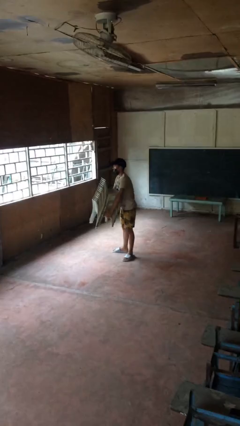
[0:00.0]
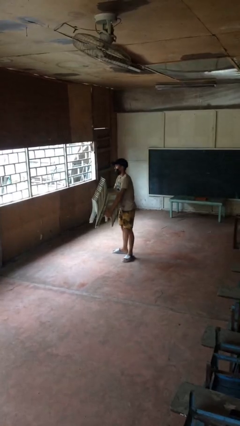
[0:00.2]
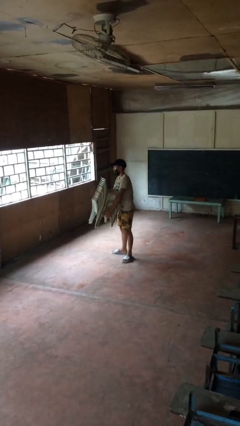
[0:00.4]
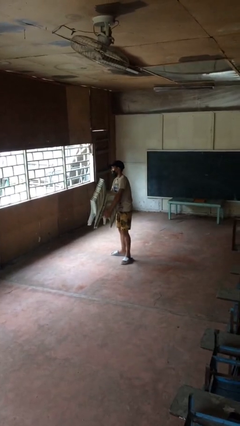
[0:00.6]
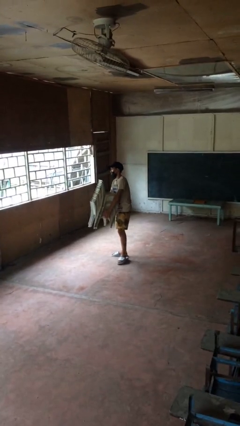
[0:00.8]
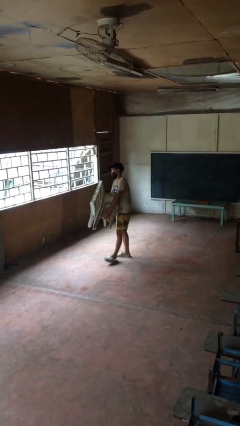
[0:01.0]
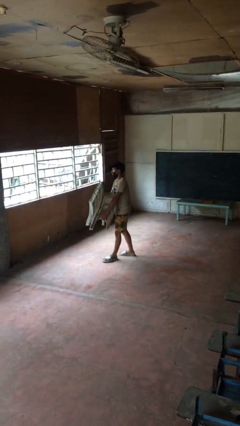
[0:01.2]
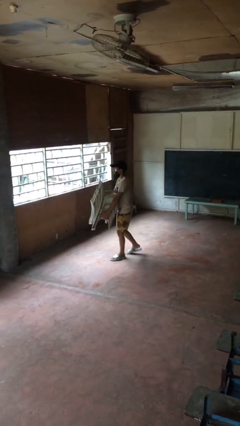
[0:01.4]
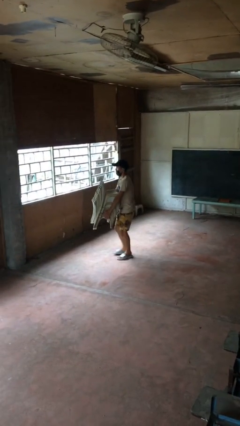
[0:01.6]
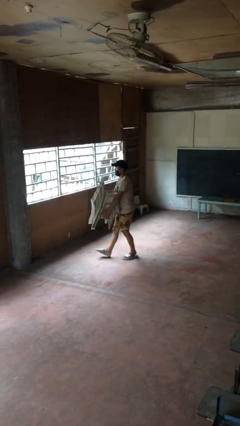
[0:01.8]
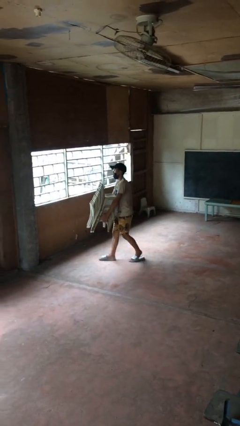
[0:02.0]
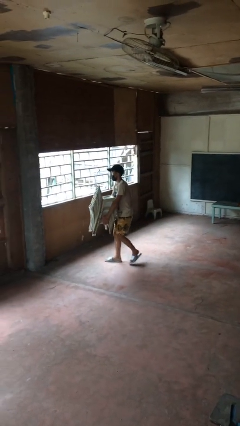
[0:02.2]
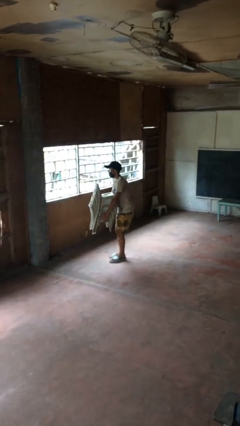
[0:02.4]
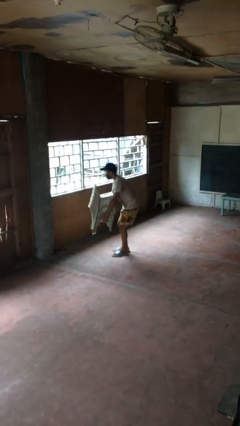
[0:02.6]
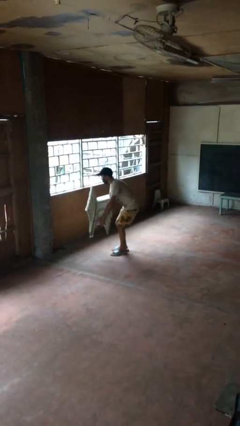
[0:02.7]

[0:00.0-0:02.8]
person carries heavy object

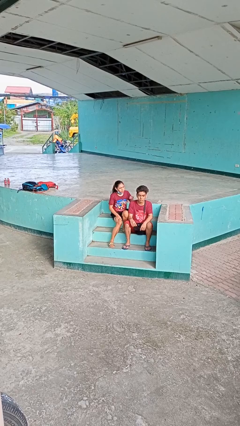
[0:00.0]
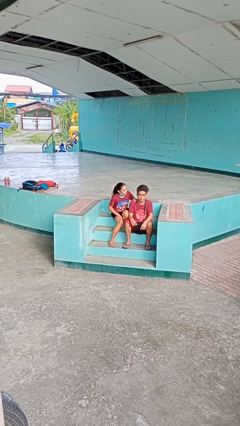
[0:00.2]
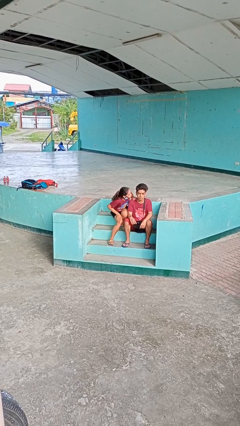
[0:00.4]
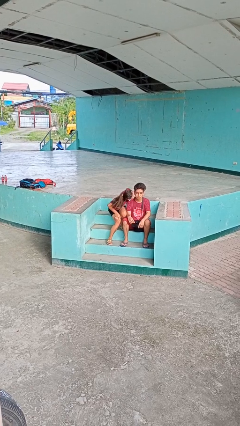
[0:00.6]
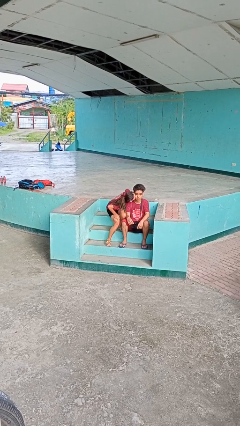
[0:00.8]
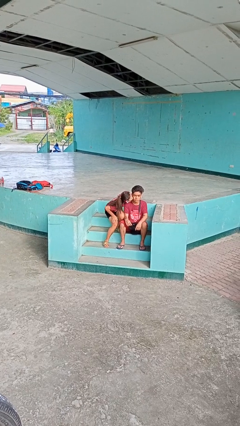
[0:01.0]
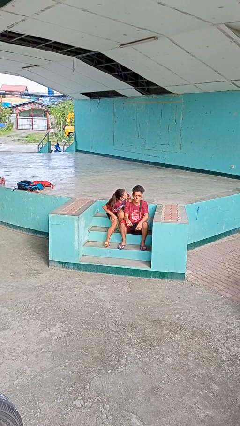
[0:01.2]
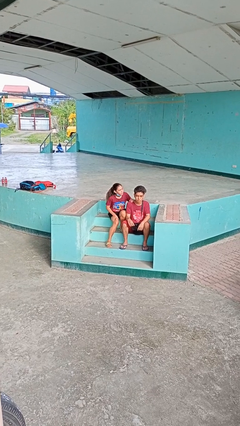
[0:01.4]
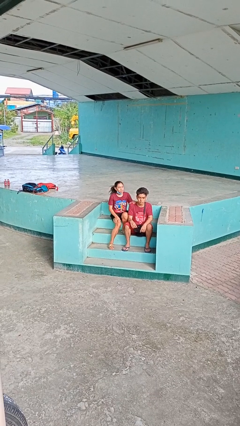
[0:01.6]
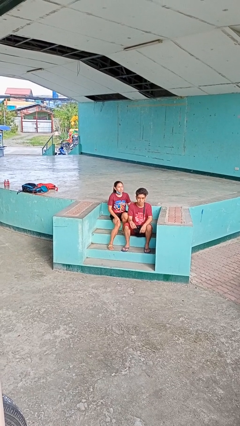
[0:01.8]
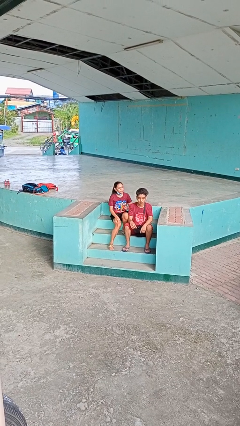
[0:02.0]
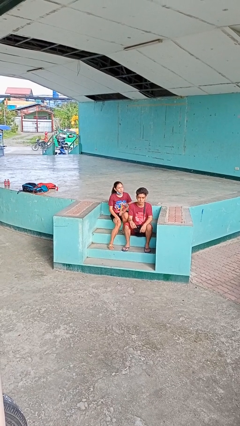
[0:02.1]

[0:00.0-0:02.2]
person kisses cheek of person

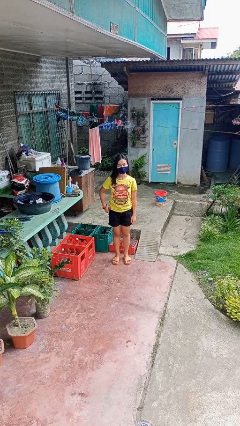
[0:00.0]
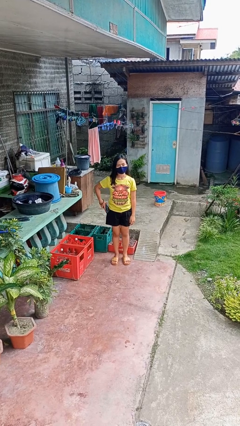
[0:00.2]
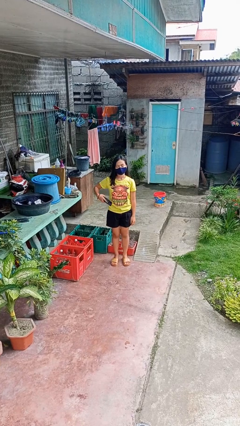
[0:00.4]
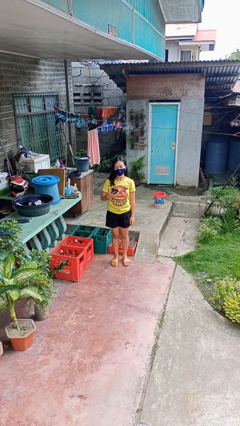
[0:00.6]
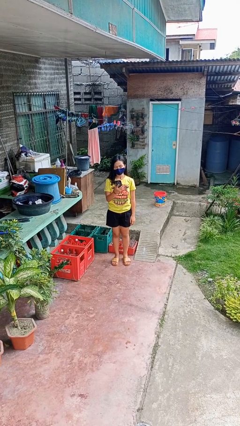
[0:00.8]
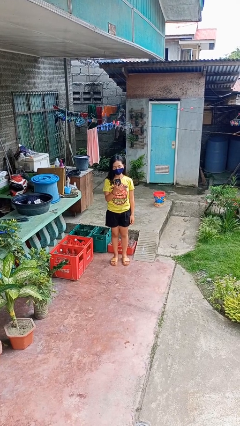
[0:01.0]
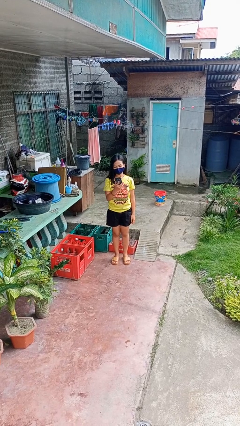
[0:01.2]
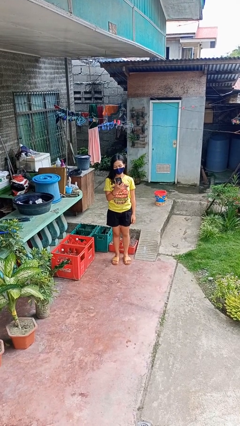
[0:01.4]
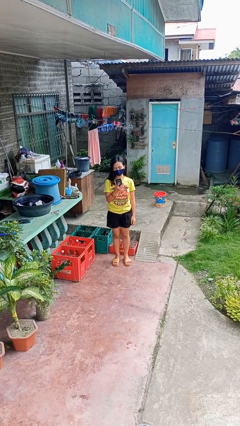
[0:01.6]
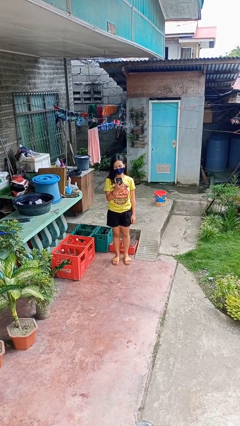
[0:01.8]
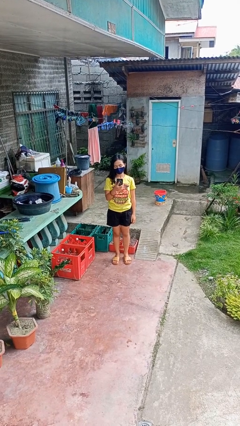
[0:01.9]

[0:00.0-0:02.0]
person takes phone from pocket

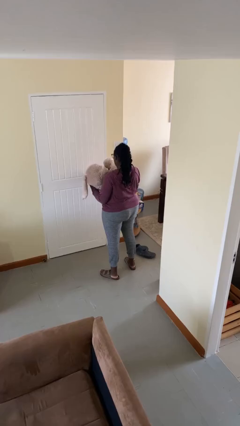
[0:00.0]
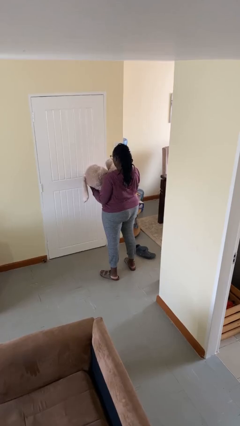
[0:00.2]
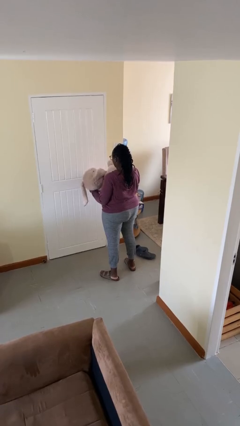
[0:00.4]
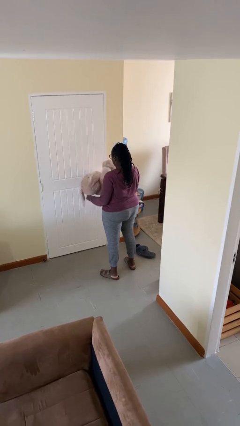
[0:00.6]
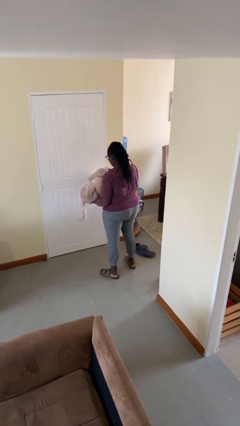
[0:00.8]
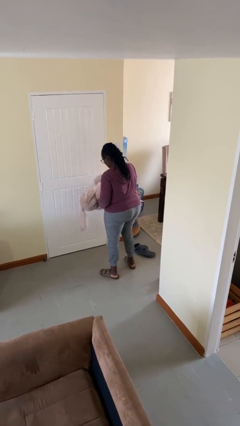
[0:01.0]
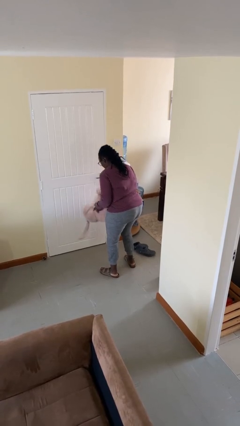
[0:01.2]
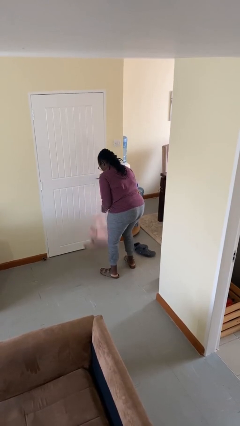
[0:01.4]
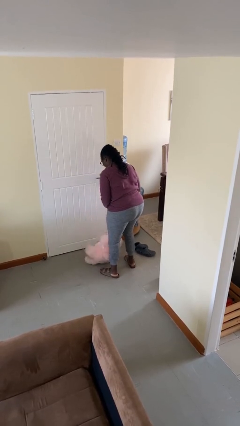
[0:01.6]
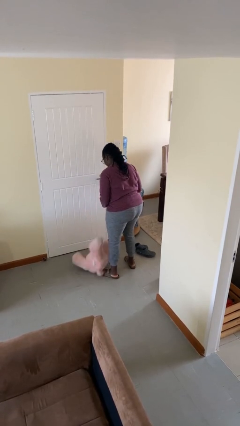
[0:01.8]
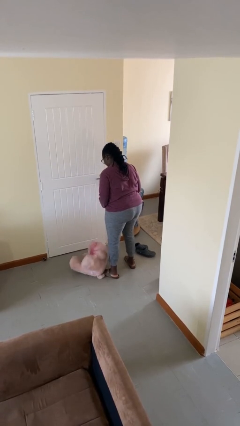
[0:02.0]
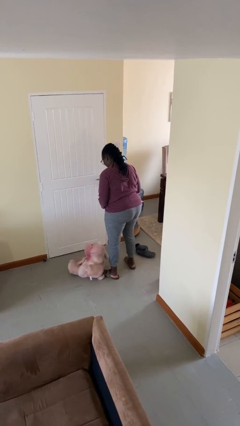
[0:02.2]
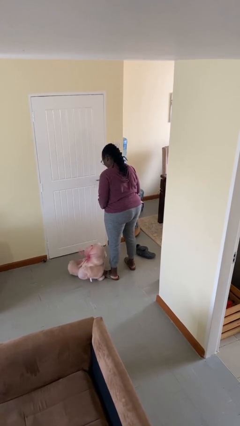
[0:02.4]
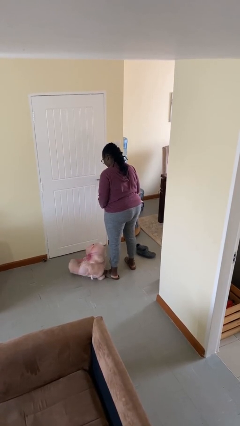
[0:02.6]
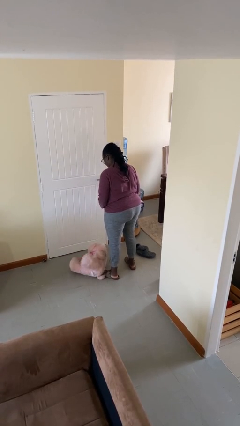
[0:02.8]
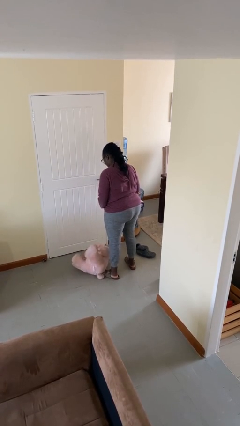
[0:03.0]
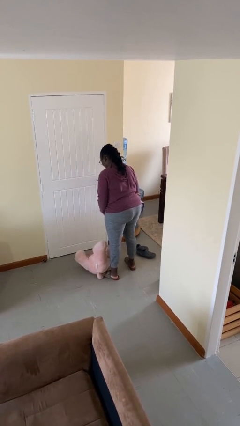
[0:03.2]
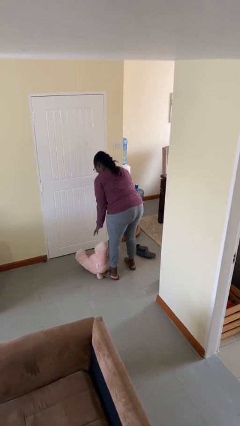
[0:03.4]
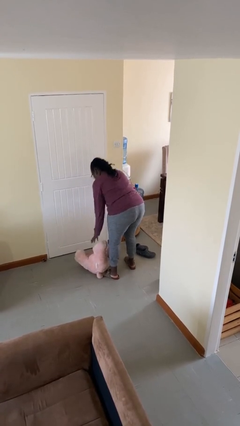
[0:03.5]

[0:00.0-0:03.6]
person drops object

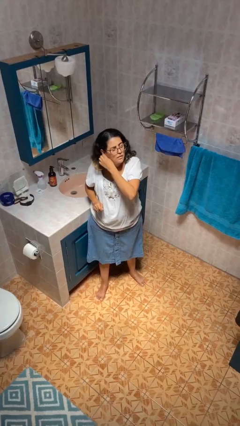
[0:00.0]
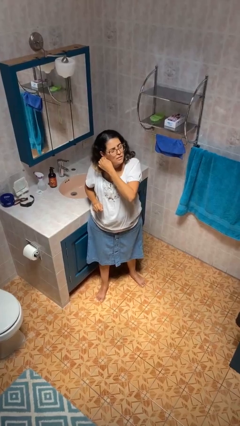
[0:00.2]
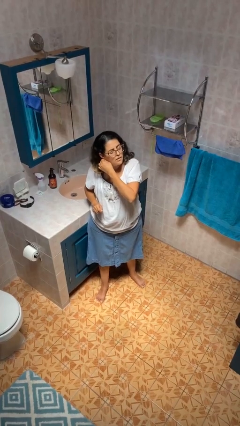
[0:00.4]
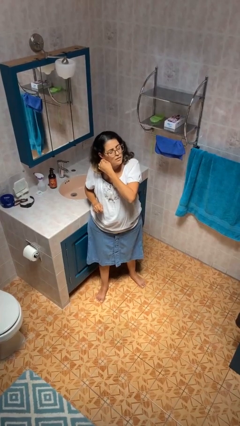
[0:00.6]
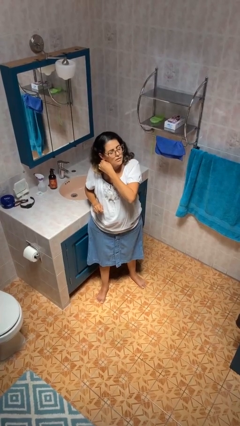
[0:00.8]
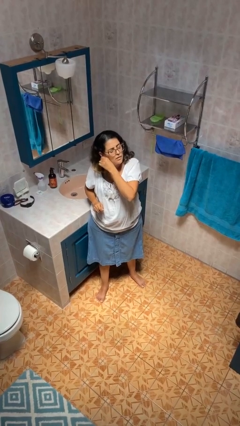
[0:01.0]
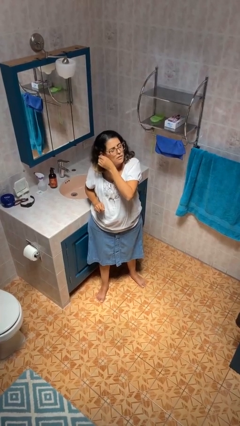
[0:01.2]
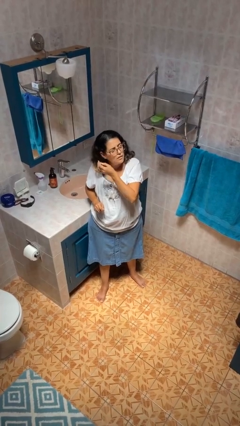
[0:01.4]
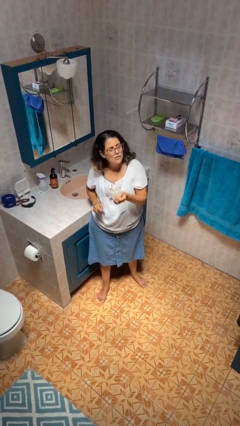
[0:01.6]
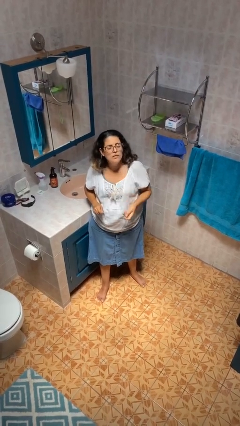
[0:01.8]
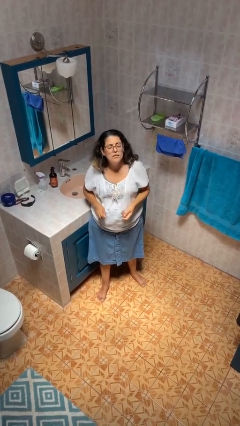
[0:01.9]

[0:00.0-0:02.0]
person takes off earrings

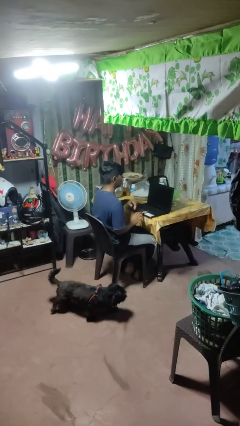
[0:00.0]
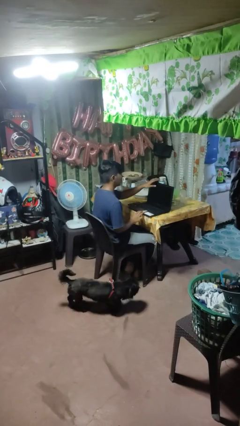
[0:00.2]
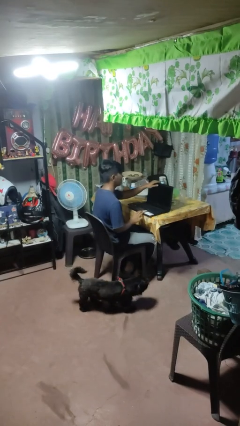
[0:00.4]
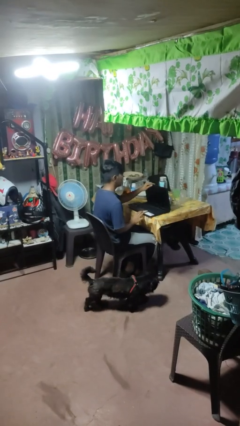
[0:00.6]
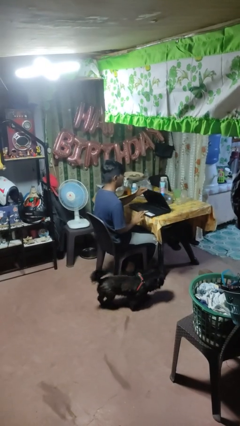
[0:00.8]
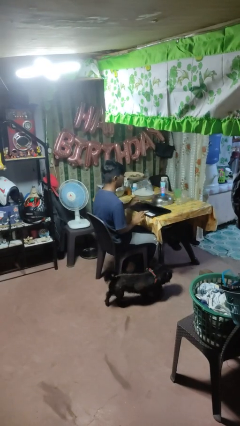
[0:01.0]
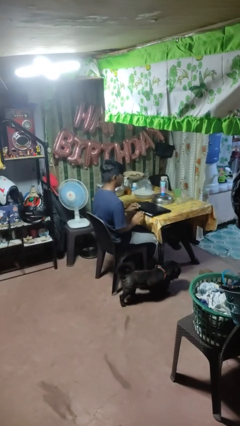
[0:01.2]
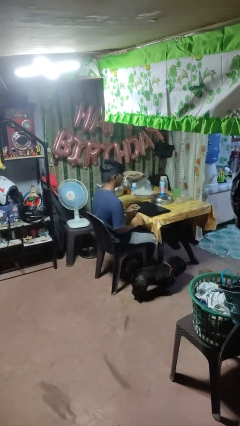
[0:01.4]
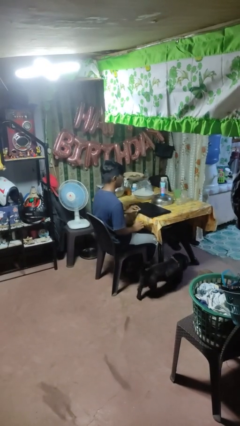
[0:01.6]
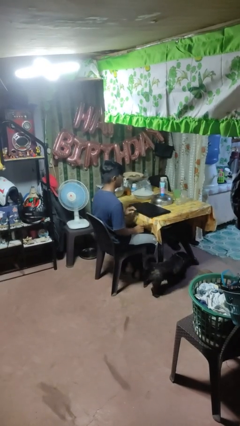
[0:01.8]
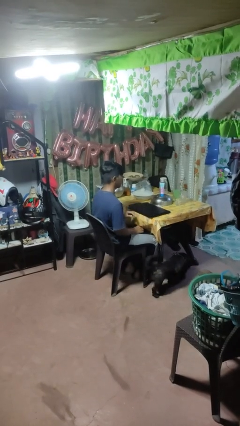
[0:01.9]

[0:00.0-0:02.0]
person closes laptop

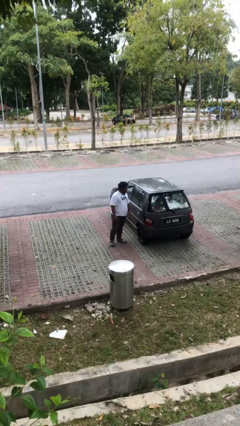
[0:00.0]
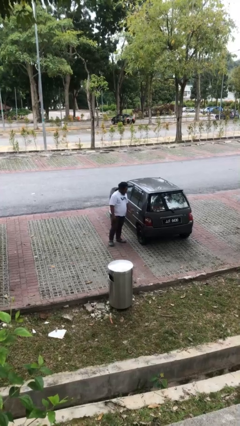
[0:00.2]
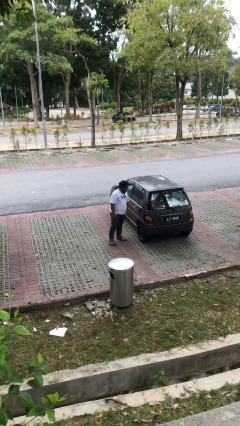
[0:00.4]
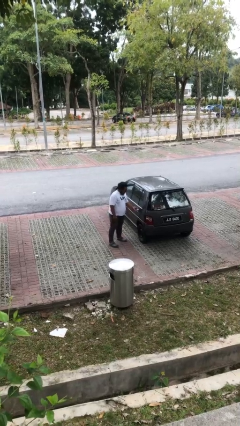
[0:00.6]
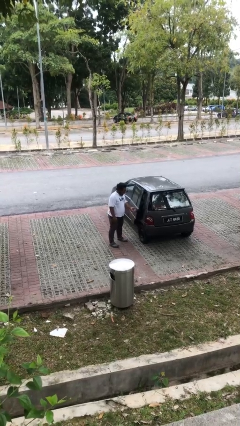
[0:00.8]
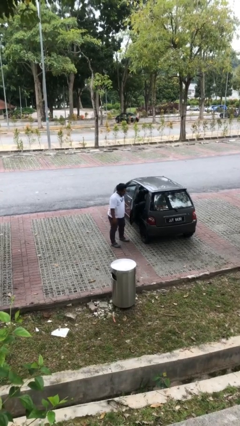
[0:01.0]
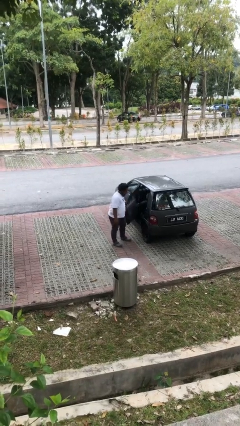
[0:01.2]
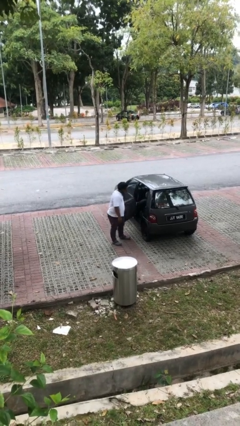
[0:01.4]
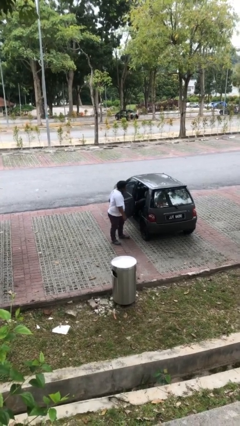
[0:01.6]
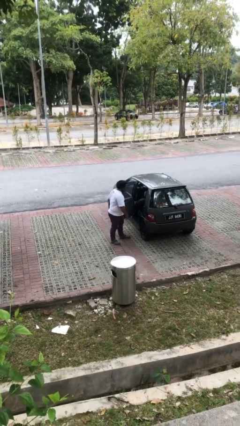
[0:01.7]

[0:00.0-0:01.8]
person opens car door

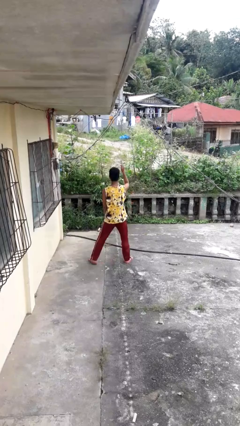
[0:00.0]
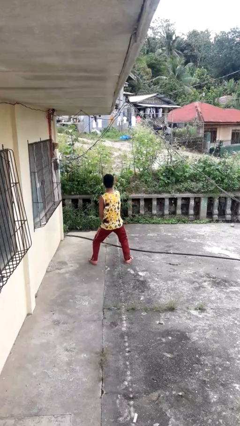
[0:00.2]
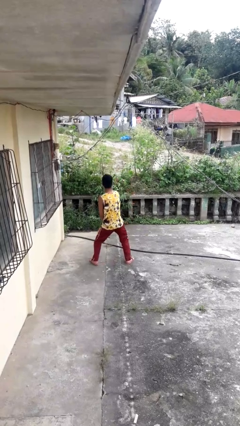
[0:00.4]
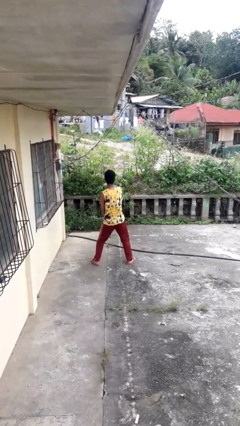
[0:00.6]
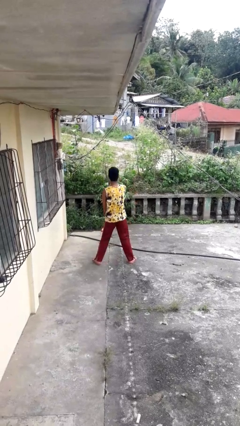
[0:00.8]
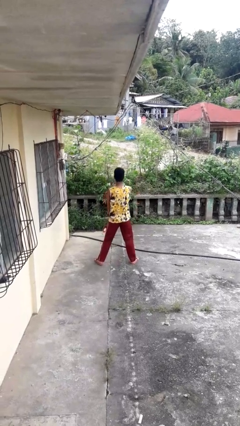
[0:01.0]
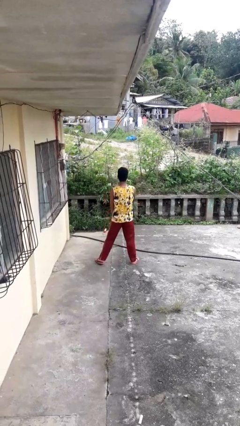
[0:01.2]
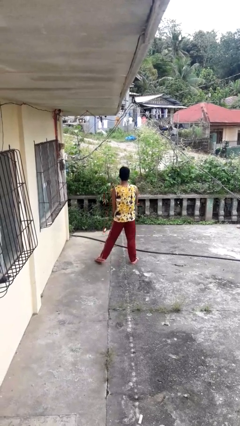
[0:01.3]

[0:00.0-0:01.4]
person karate chop
